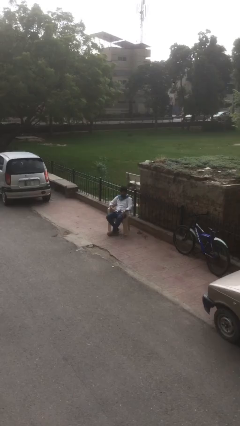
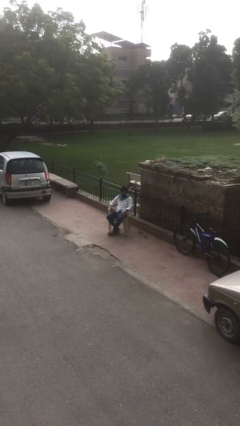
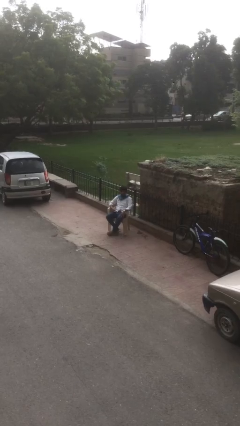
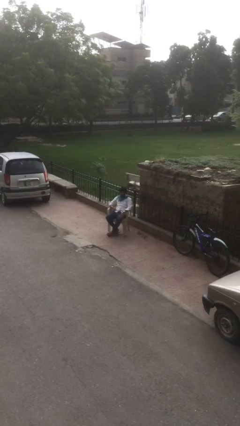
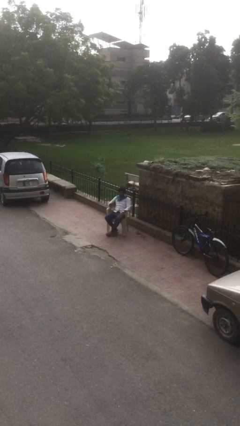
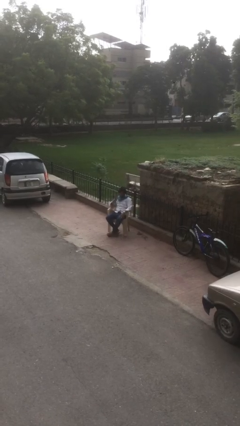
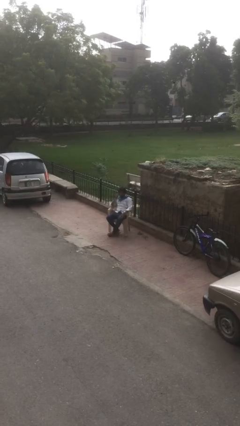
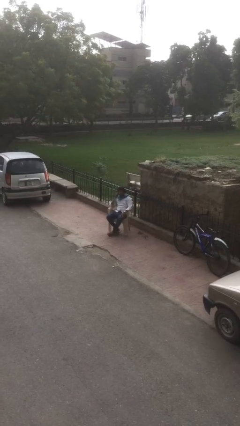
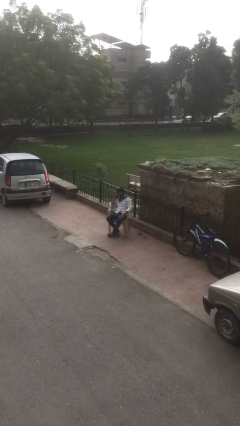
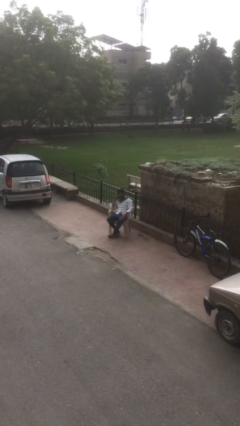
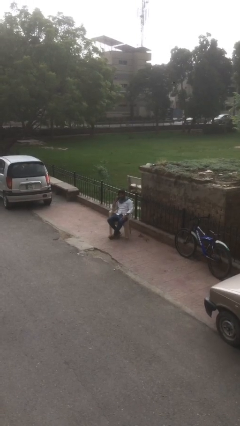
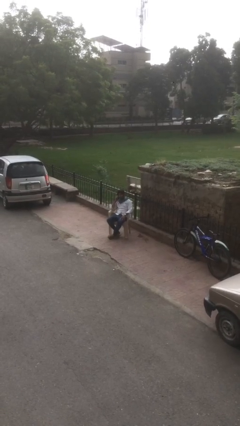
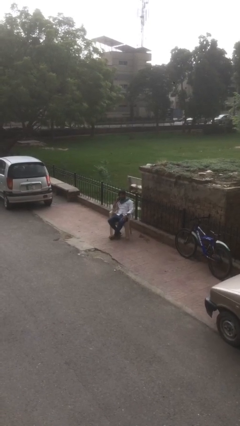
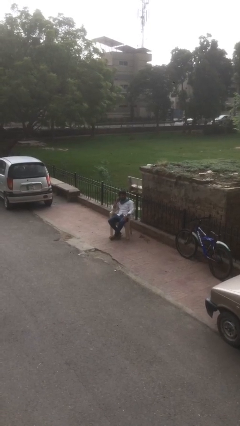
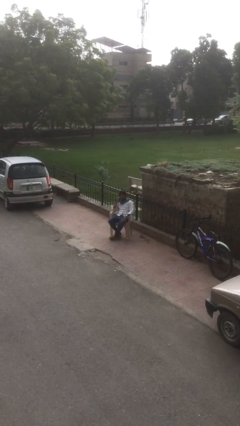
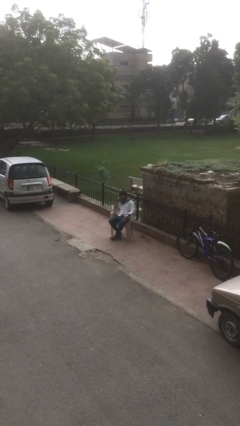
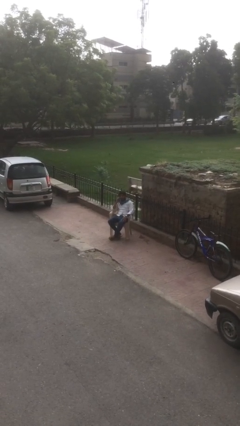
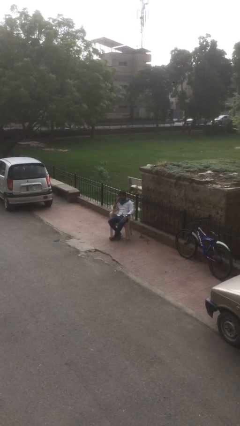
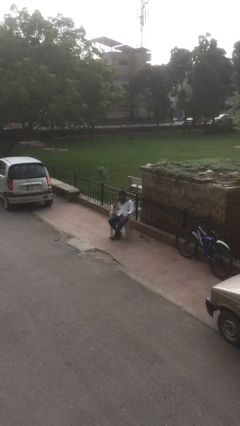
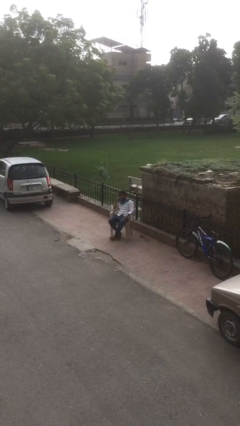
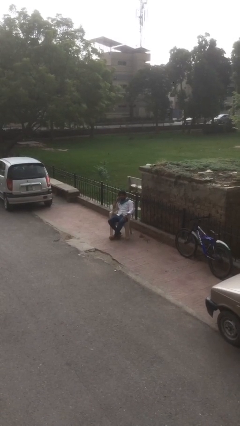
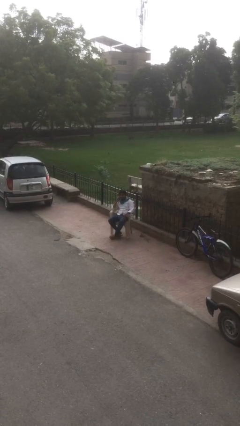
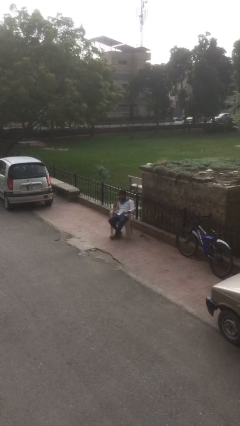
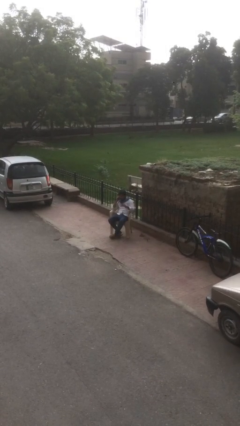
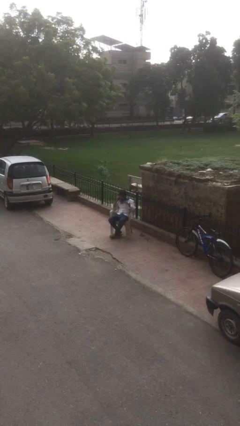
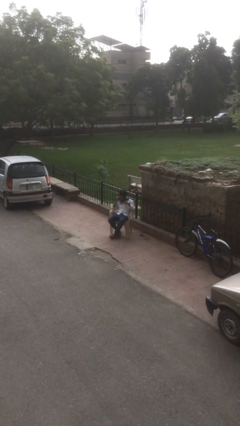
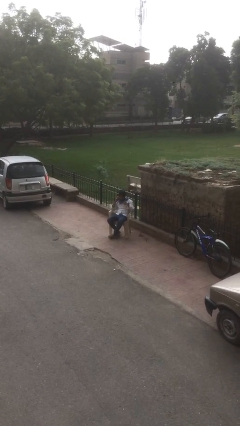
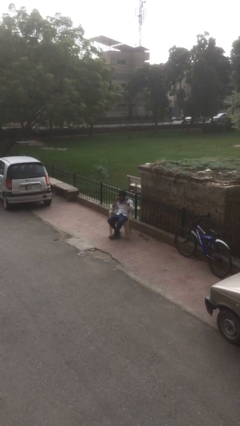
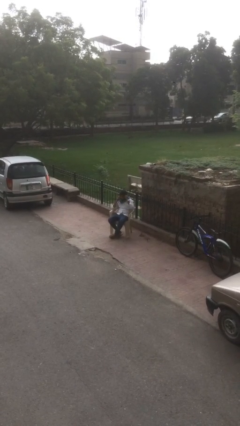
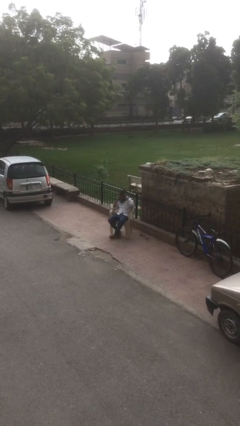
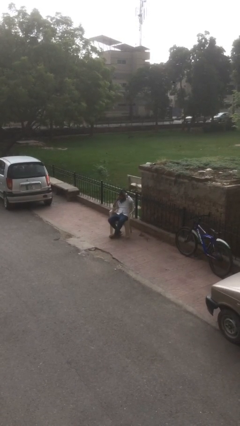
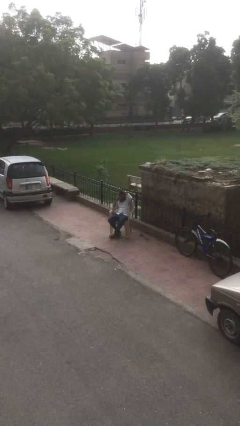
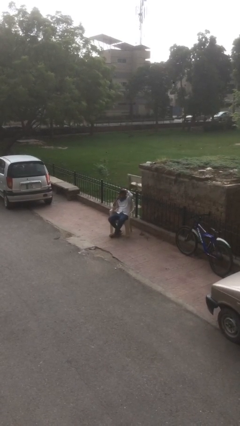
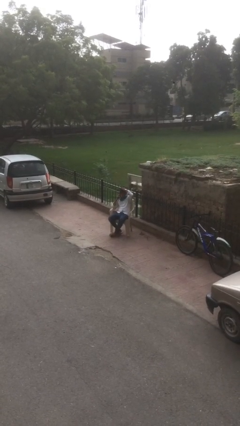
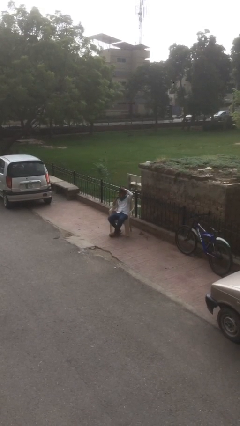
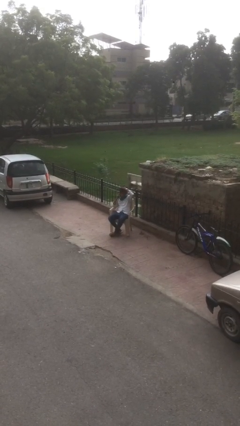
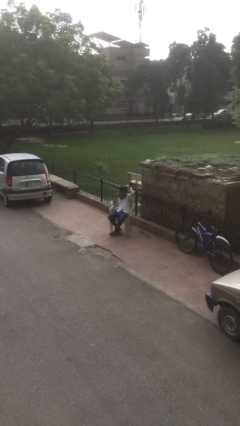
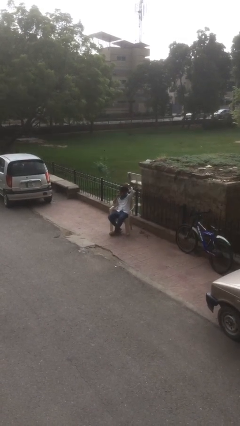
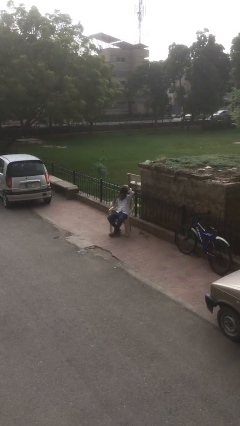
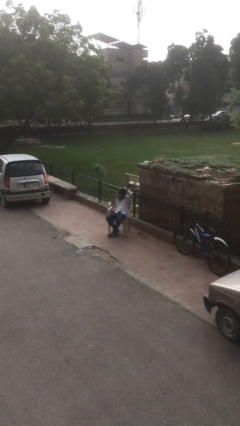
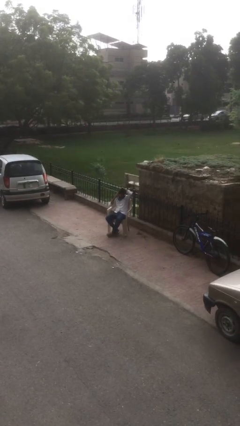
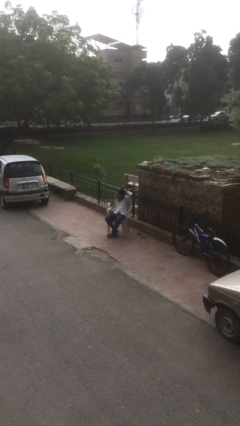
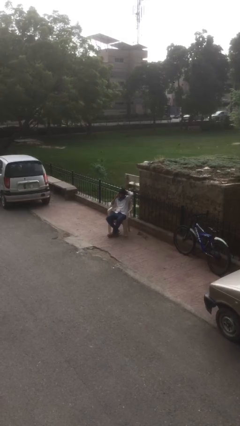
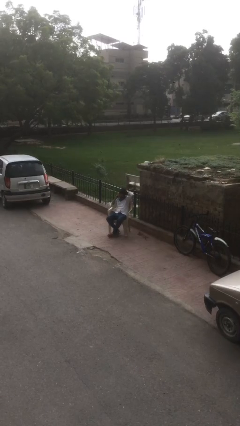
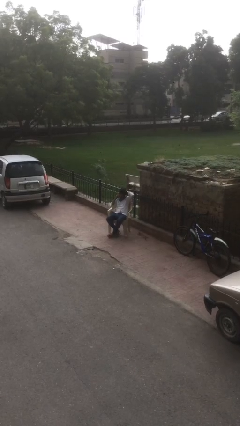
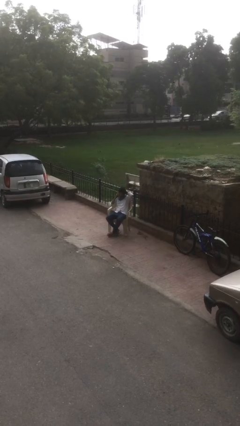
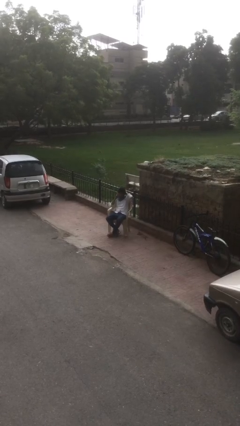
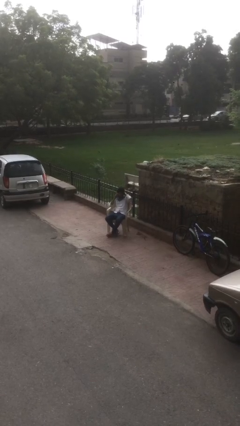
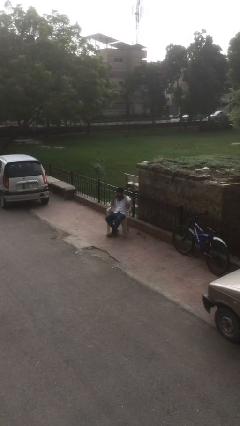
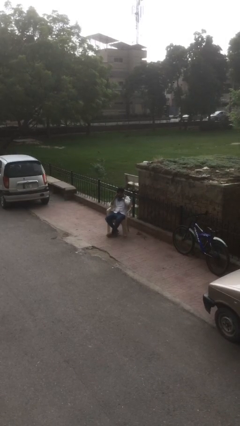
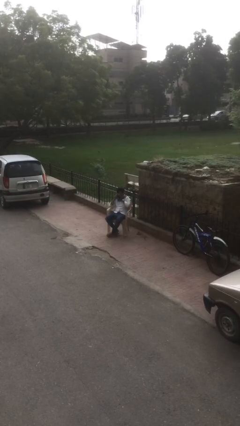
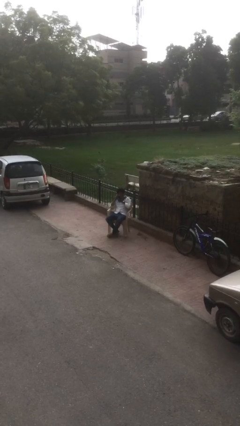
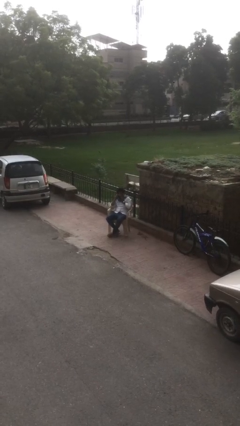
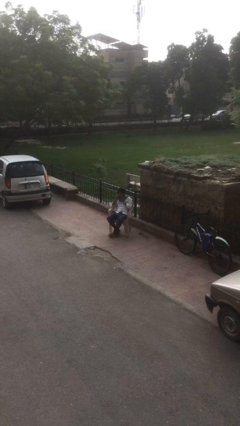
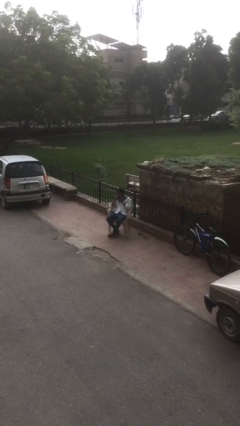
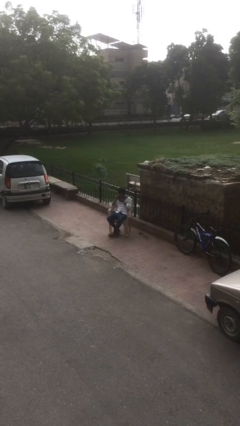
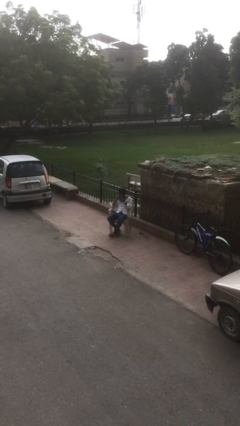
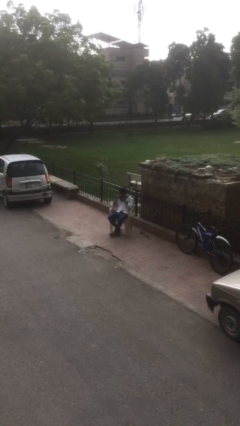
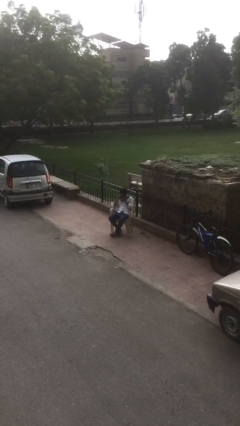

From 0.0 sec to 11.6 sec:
person talks on phone

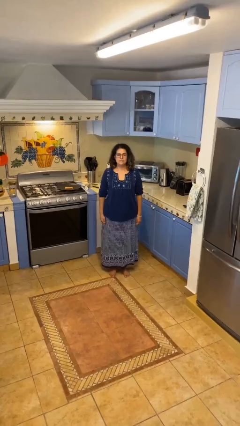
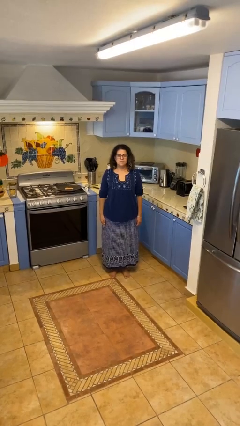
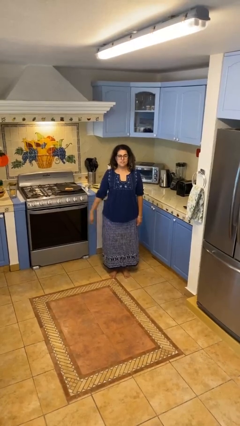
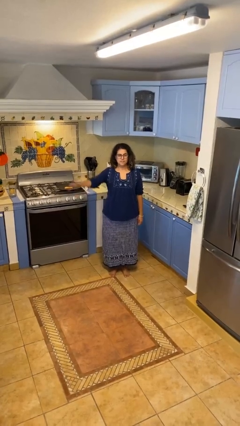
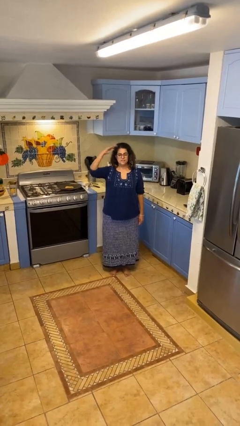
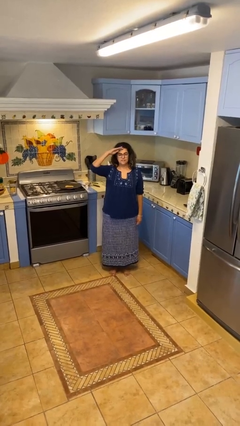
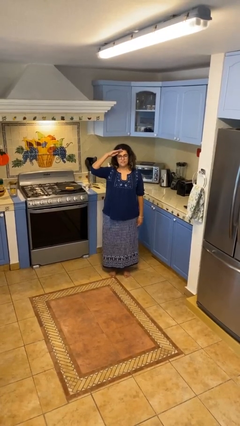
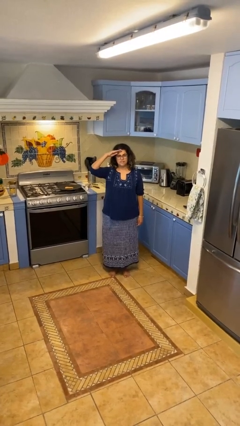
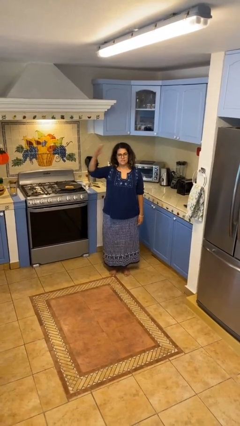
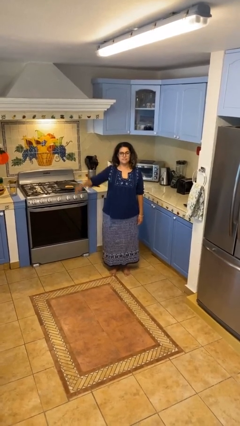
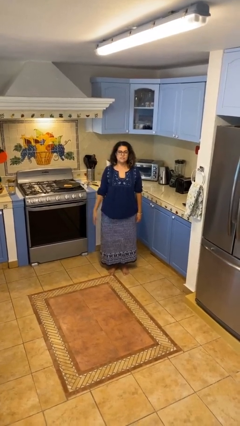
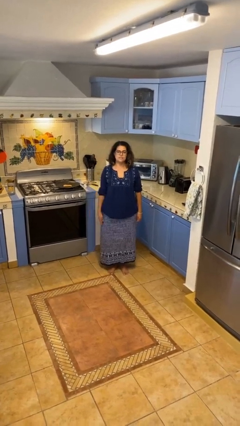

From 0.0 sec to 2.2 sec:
person salutes

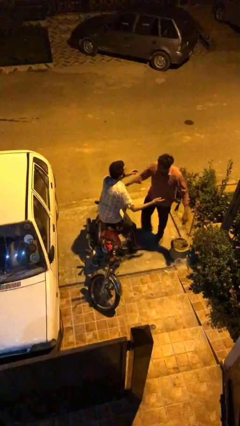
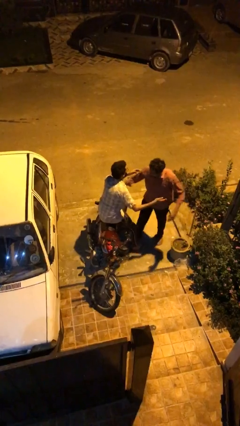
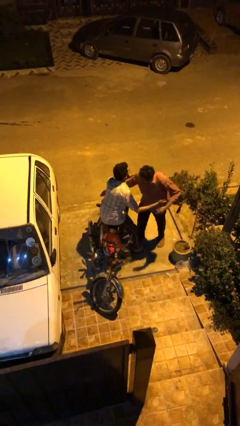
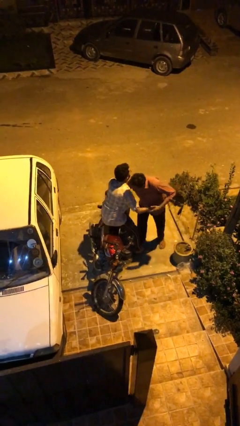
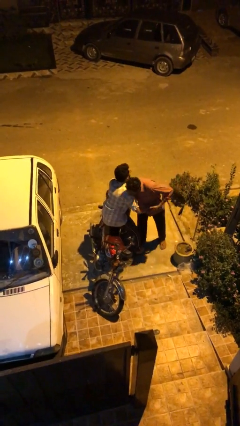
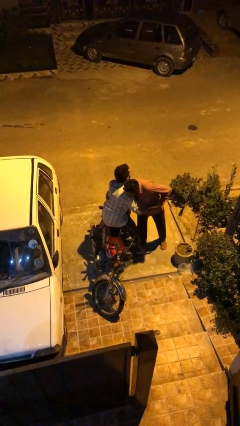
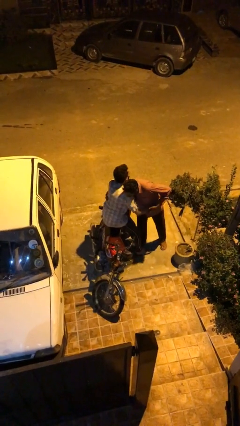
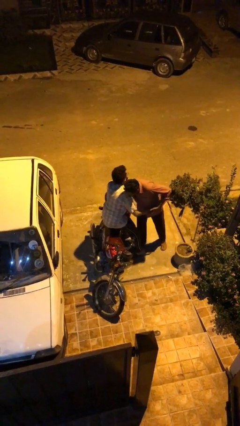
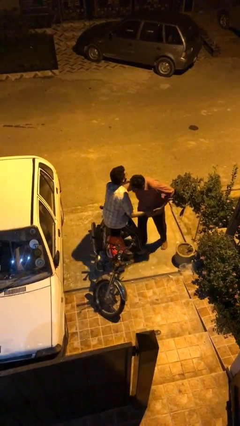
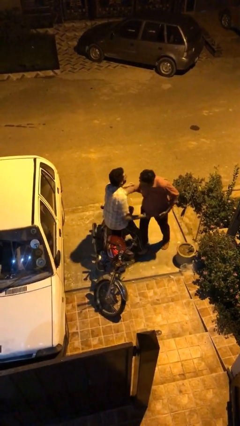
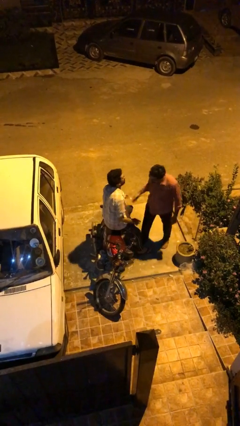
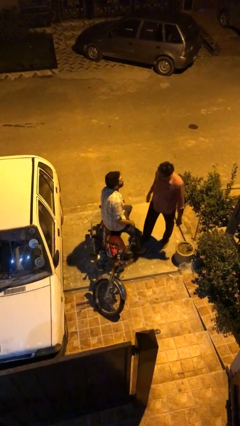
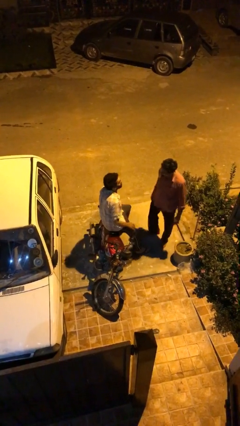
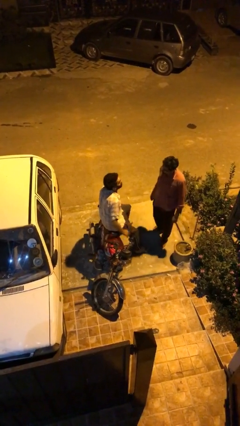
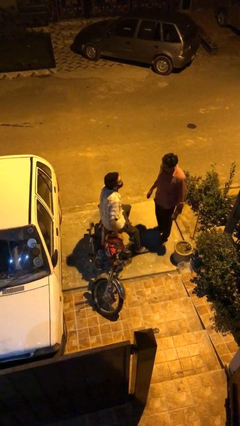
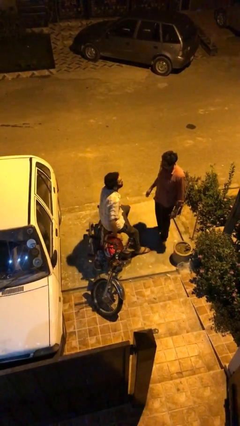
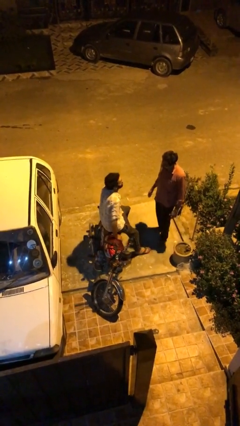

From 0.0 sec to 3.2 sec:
person embraces person

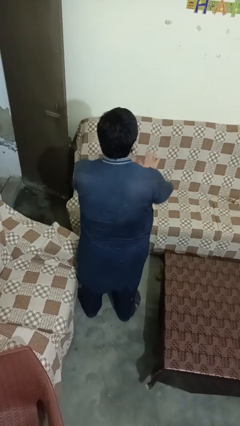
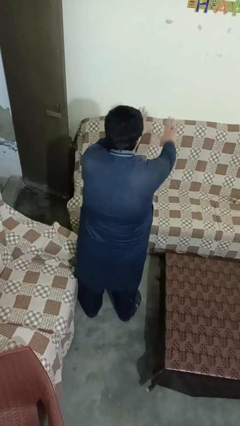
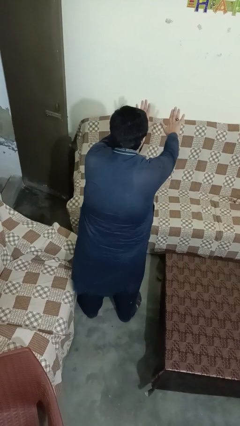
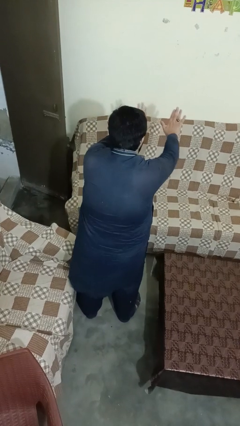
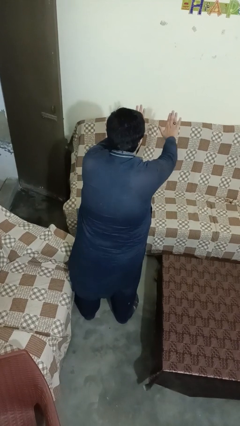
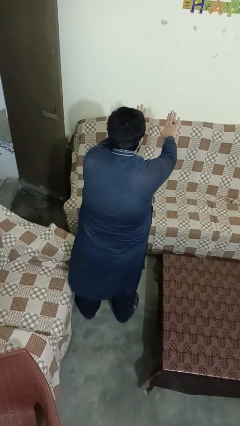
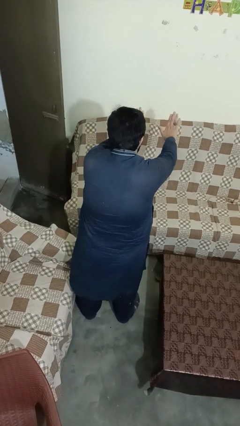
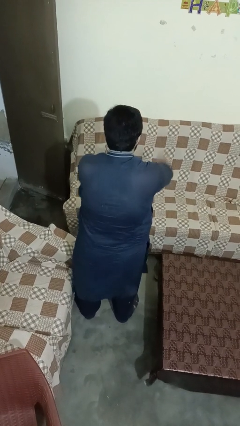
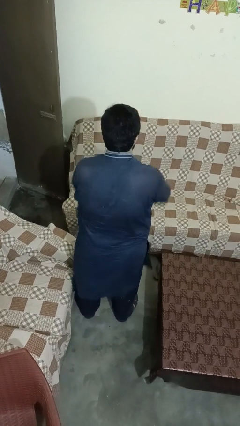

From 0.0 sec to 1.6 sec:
person gestures stop
